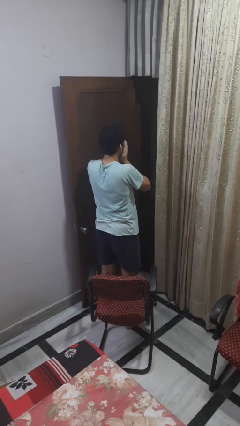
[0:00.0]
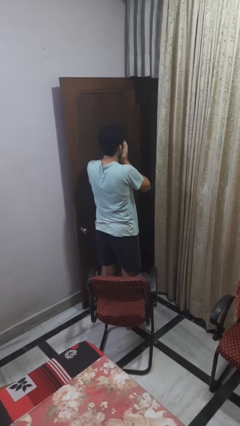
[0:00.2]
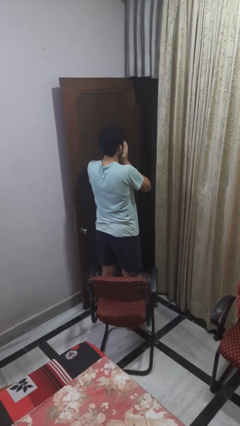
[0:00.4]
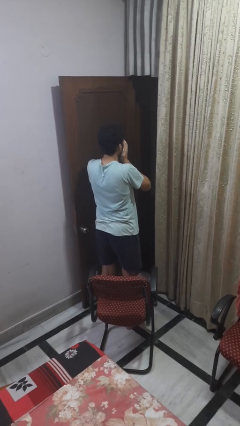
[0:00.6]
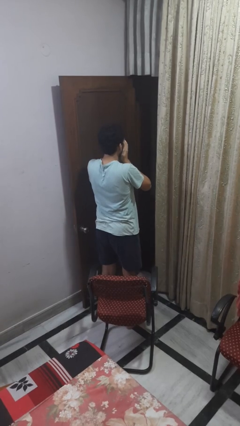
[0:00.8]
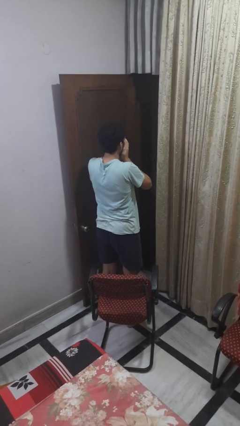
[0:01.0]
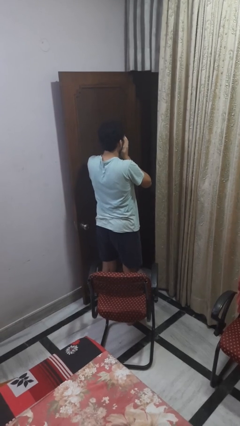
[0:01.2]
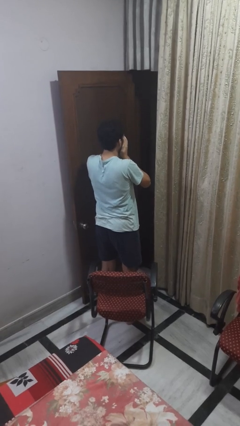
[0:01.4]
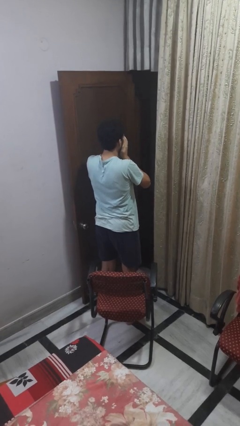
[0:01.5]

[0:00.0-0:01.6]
person yawns

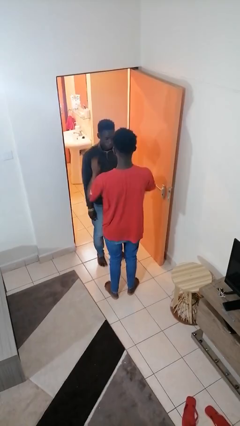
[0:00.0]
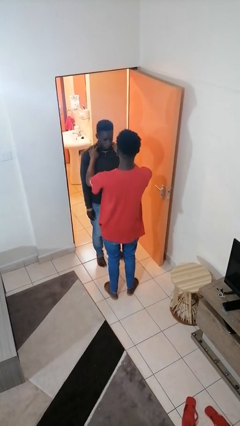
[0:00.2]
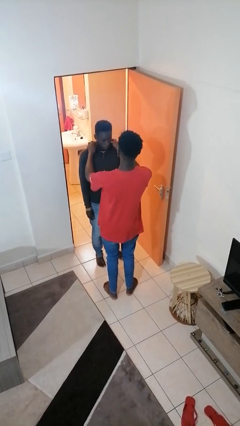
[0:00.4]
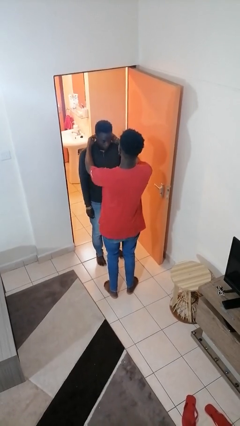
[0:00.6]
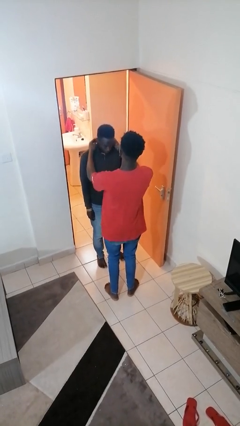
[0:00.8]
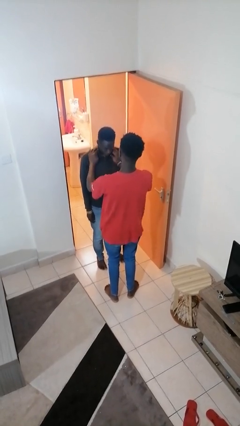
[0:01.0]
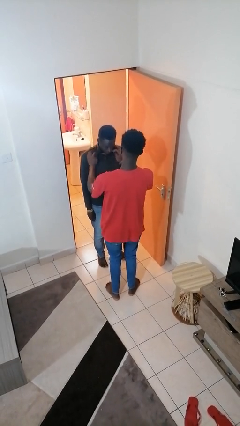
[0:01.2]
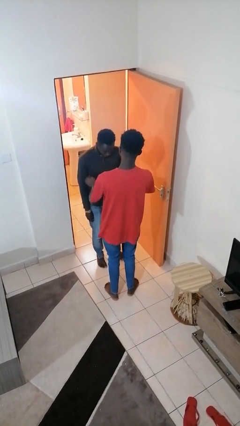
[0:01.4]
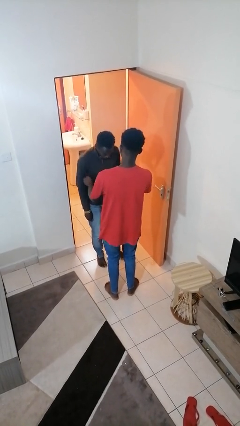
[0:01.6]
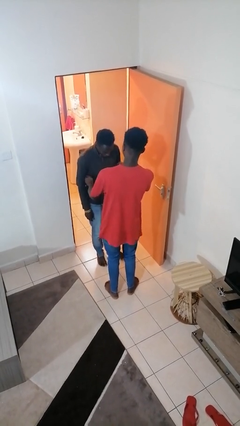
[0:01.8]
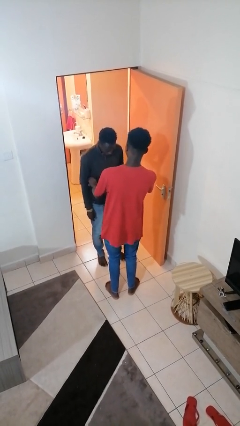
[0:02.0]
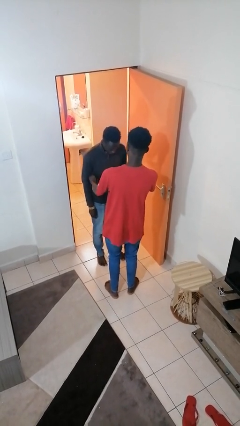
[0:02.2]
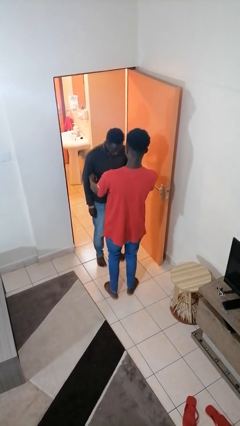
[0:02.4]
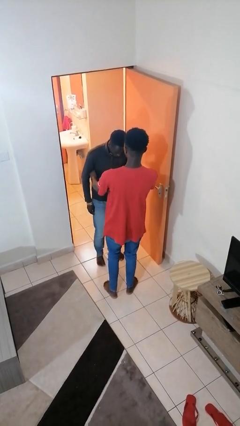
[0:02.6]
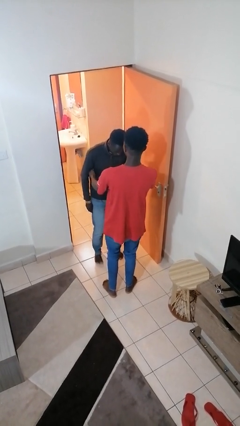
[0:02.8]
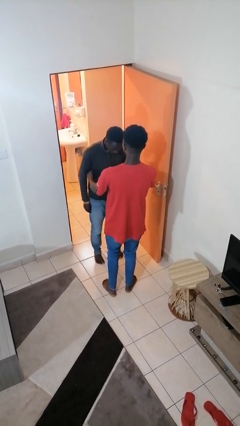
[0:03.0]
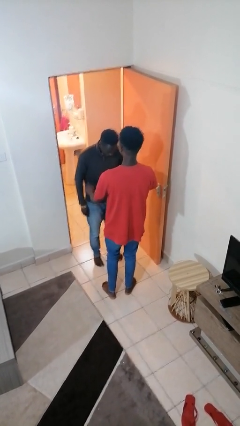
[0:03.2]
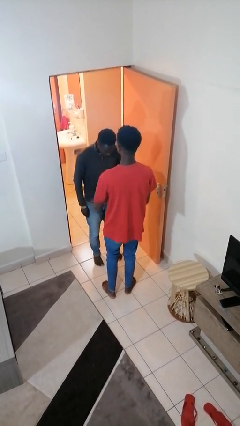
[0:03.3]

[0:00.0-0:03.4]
person tickles person

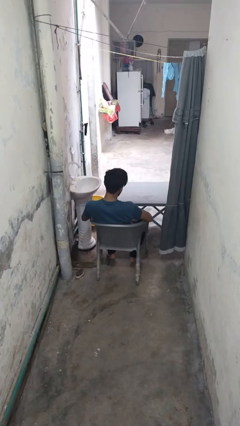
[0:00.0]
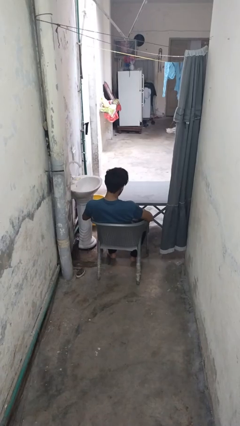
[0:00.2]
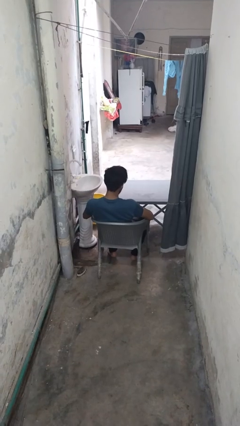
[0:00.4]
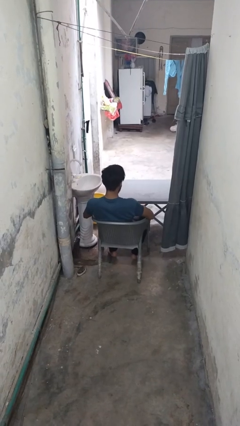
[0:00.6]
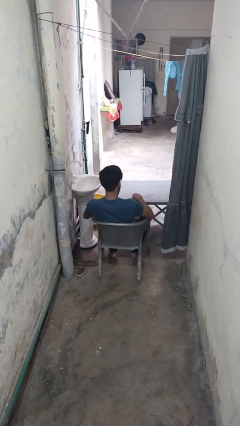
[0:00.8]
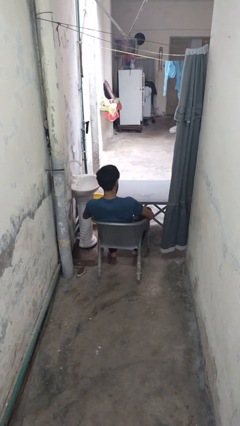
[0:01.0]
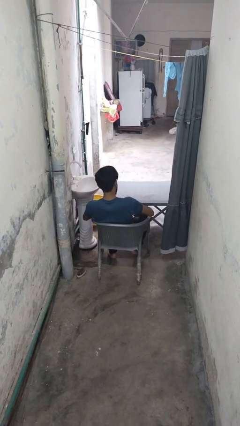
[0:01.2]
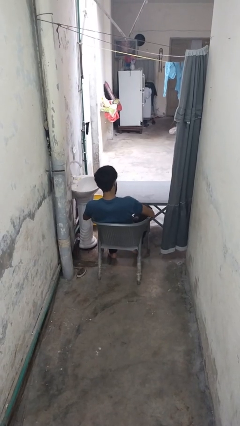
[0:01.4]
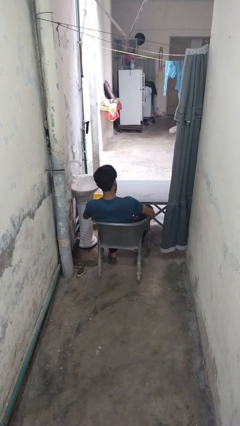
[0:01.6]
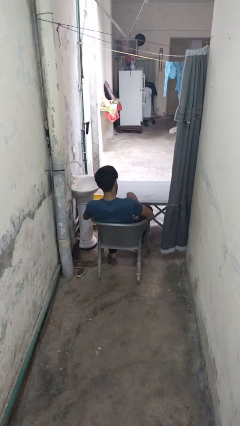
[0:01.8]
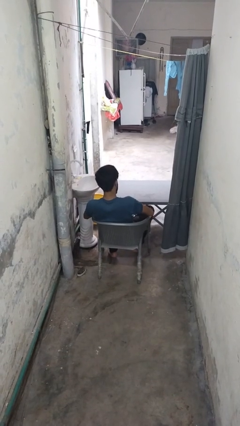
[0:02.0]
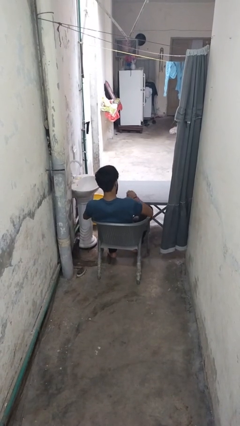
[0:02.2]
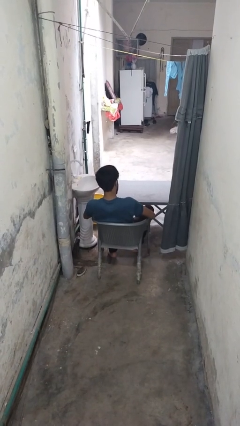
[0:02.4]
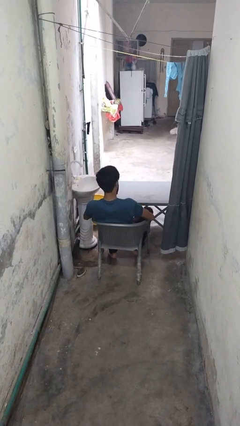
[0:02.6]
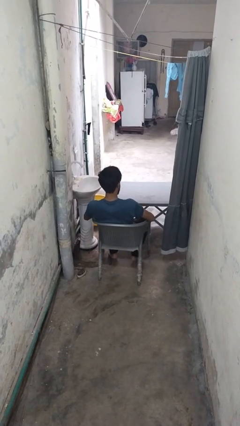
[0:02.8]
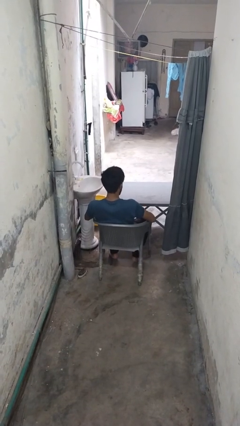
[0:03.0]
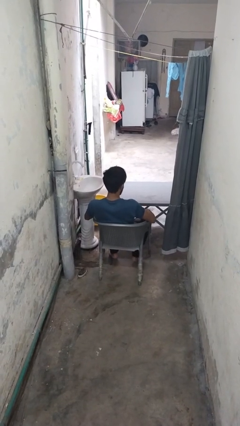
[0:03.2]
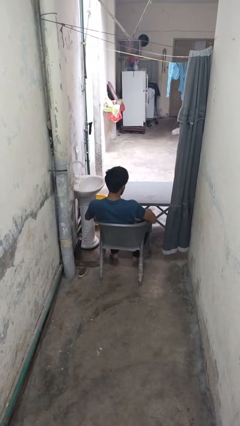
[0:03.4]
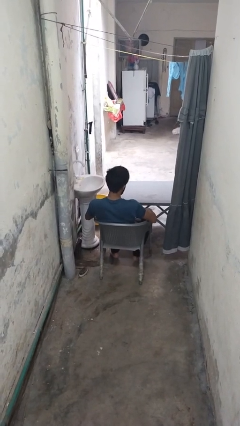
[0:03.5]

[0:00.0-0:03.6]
person slaps hands on thighs

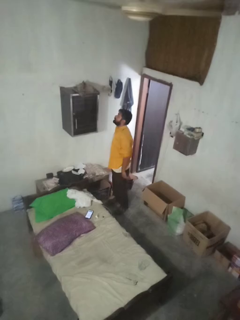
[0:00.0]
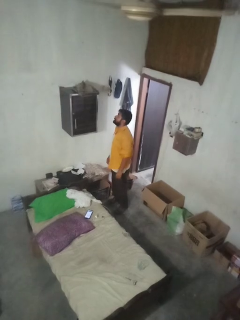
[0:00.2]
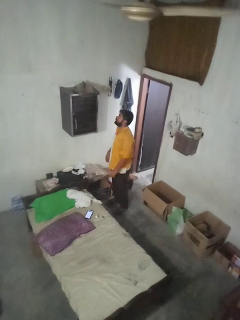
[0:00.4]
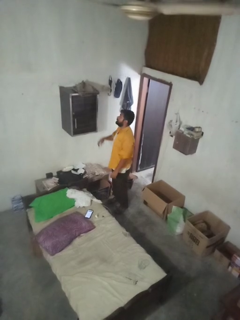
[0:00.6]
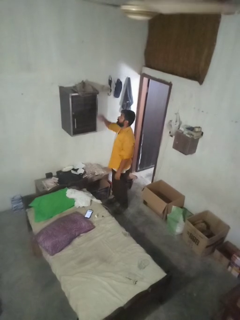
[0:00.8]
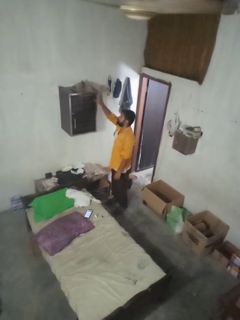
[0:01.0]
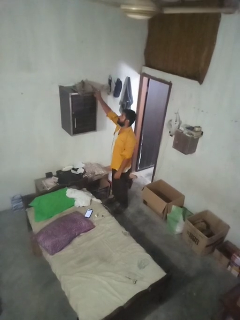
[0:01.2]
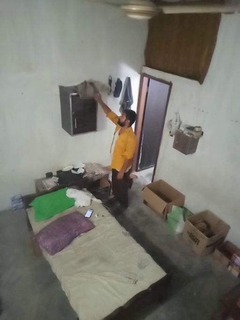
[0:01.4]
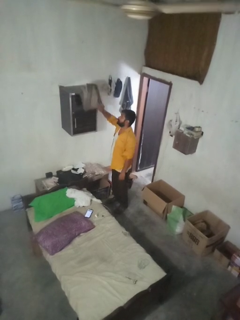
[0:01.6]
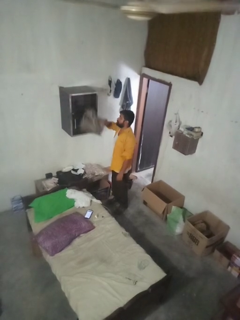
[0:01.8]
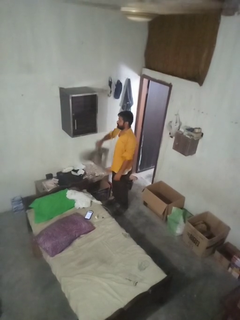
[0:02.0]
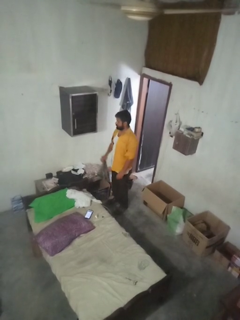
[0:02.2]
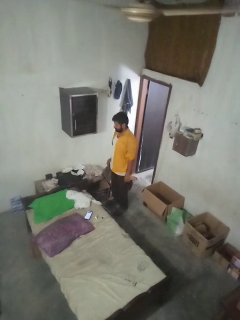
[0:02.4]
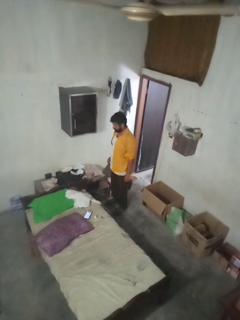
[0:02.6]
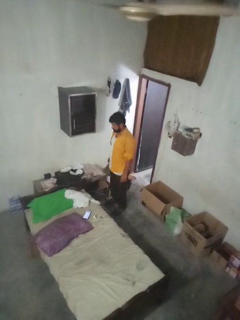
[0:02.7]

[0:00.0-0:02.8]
person picks up object from shelf

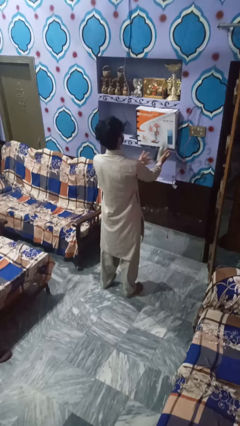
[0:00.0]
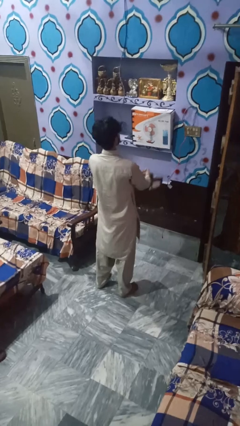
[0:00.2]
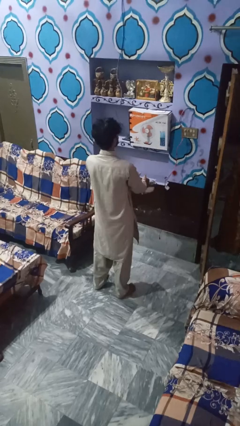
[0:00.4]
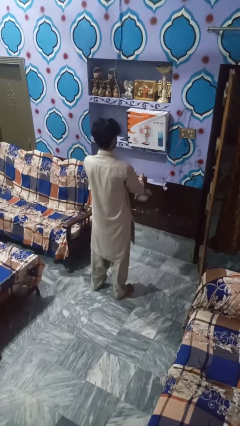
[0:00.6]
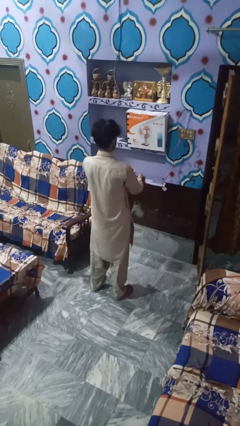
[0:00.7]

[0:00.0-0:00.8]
person catches dropped object

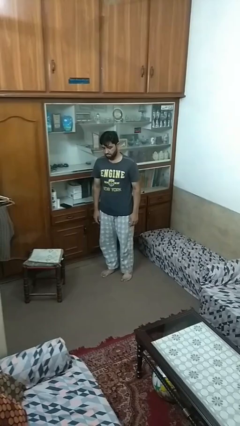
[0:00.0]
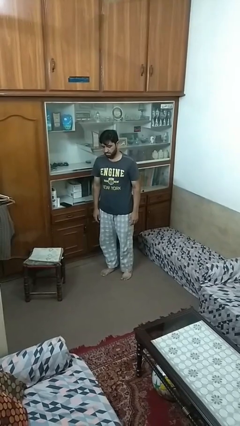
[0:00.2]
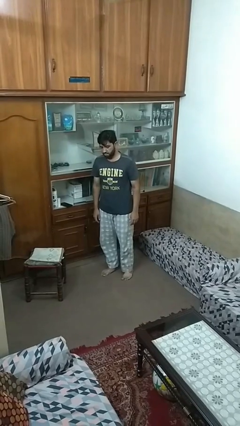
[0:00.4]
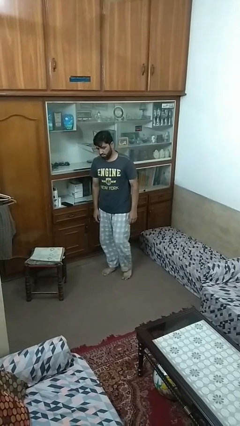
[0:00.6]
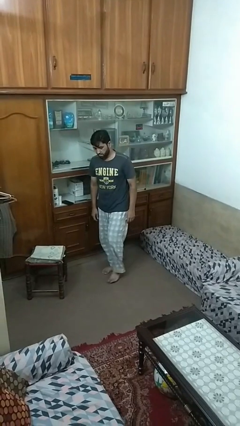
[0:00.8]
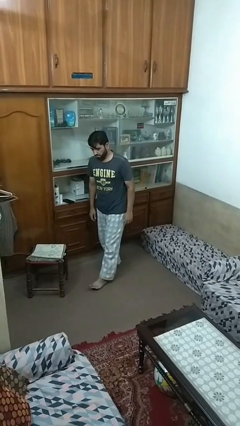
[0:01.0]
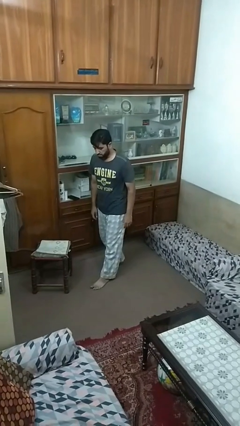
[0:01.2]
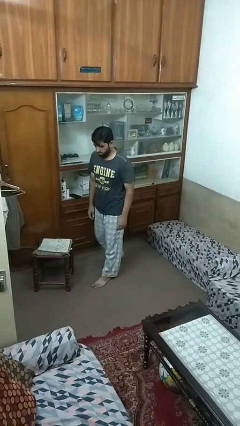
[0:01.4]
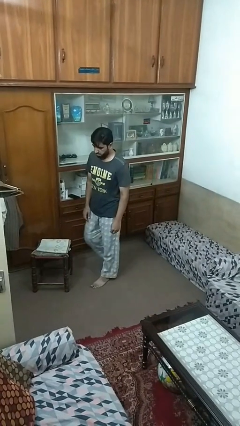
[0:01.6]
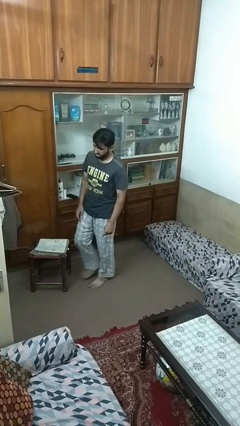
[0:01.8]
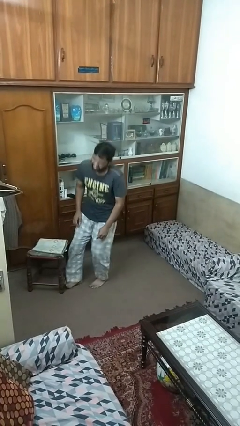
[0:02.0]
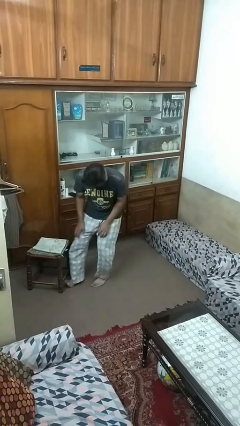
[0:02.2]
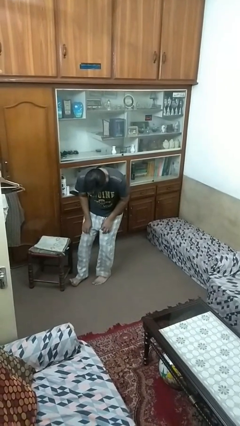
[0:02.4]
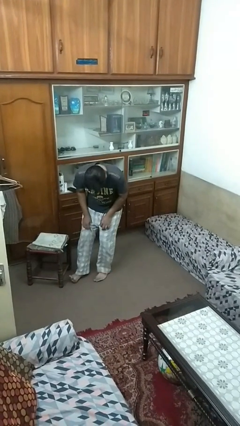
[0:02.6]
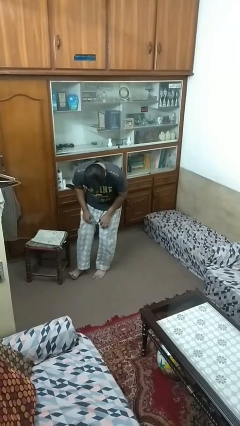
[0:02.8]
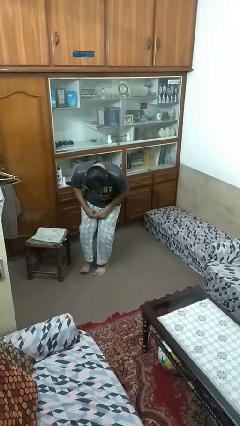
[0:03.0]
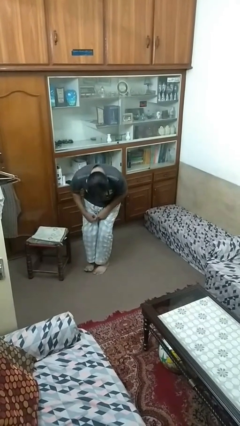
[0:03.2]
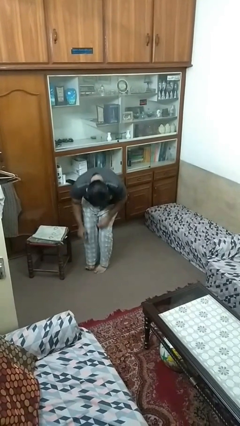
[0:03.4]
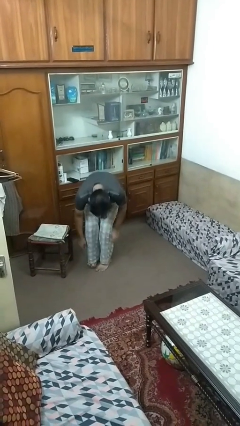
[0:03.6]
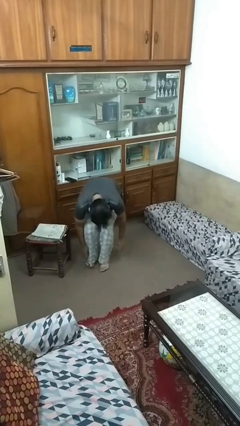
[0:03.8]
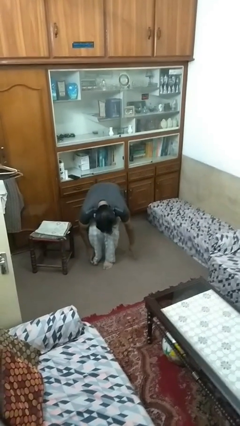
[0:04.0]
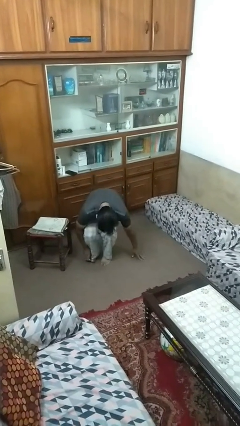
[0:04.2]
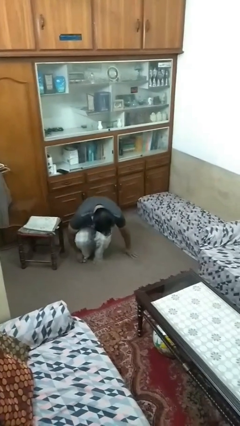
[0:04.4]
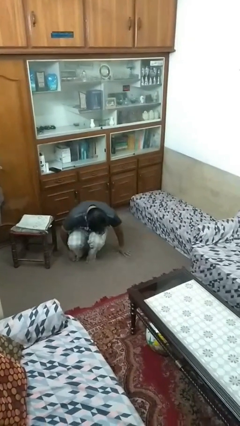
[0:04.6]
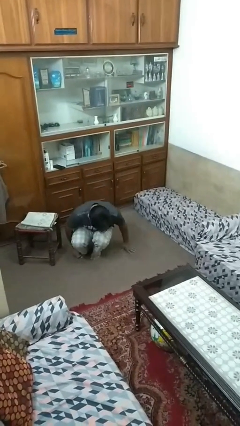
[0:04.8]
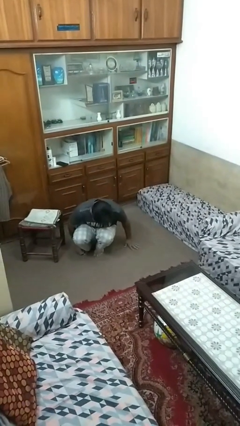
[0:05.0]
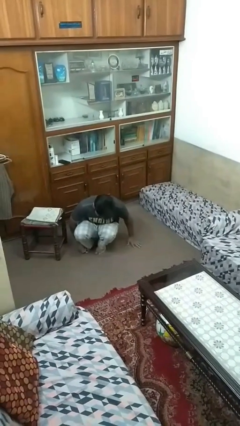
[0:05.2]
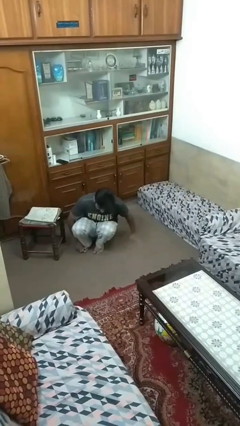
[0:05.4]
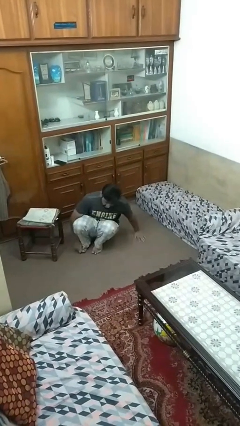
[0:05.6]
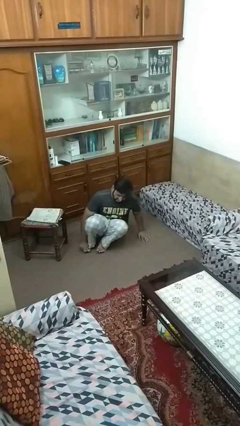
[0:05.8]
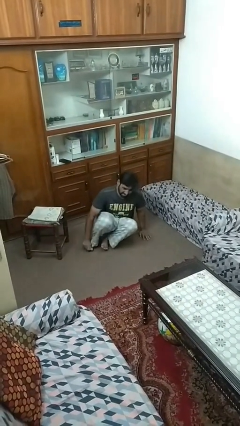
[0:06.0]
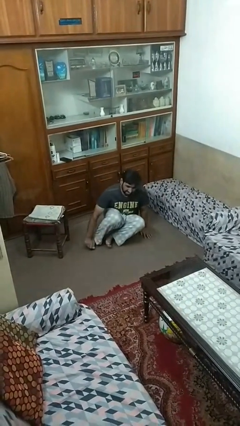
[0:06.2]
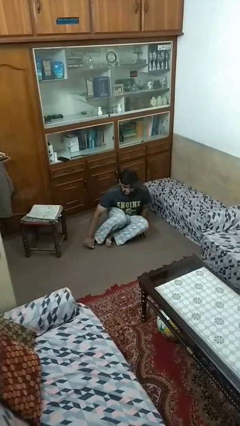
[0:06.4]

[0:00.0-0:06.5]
person trips on object on floor
